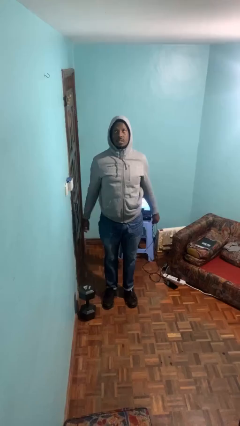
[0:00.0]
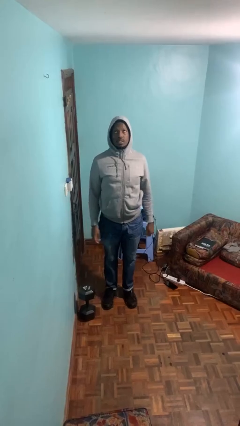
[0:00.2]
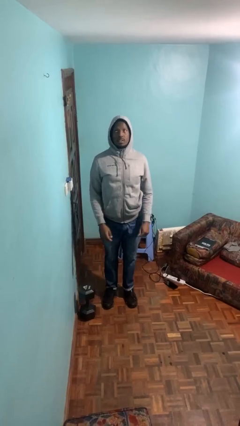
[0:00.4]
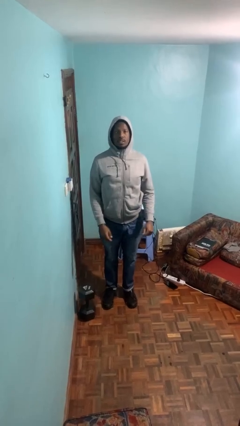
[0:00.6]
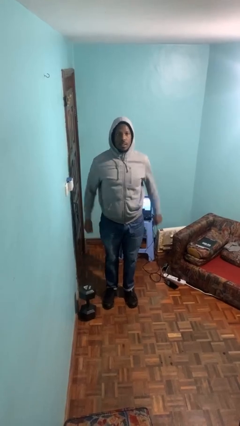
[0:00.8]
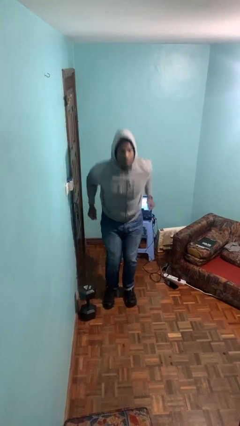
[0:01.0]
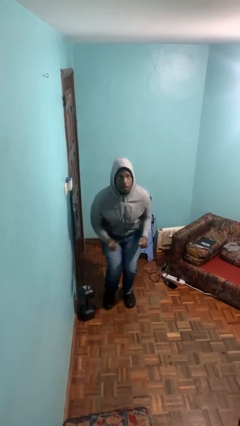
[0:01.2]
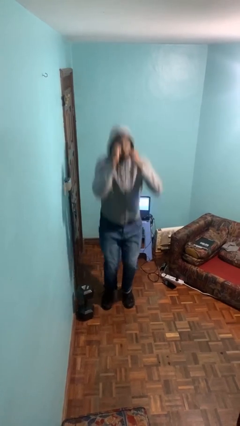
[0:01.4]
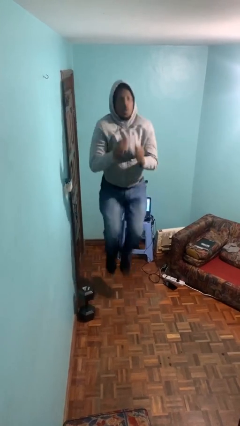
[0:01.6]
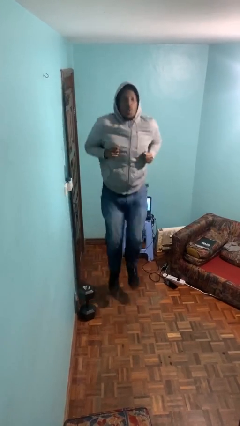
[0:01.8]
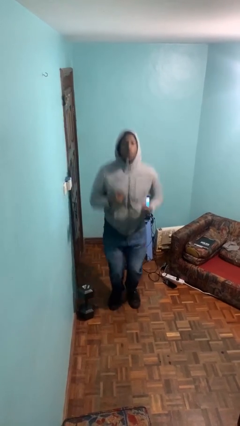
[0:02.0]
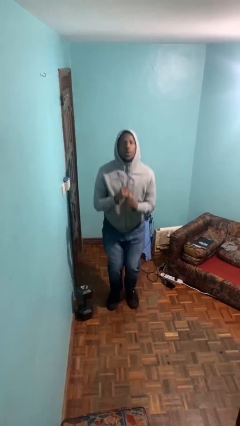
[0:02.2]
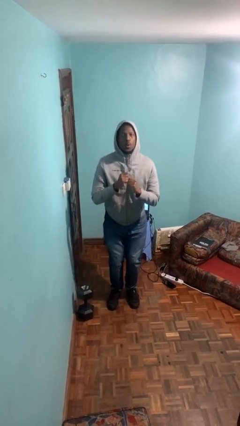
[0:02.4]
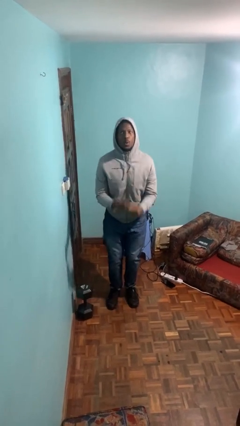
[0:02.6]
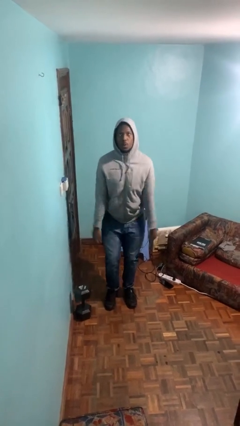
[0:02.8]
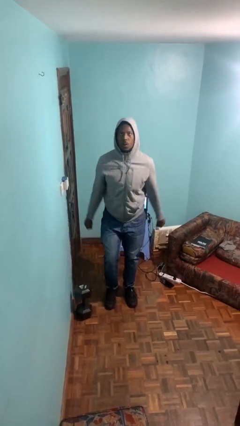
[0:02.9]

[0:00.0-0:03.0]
person jumps

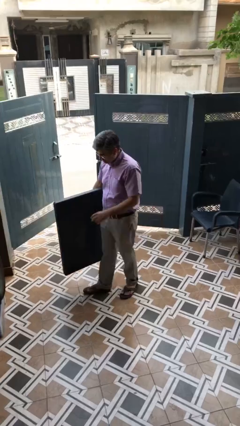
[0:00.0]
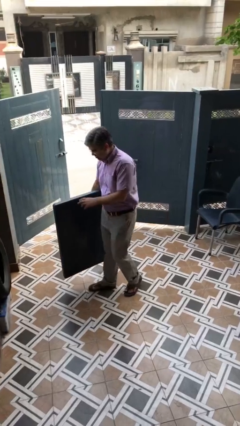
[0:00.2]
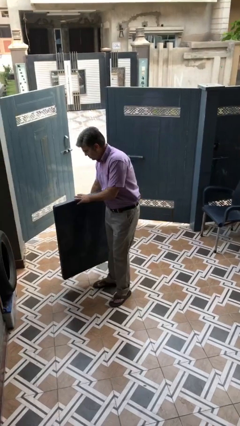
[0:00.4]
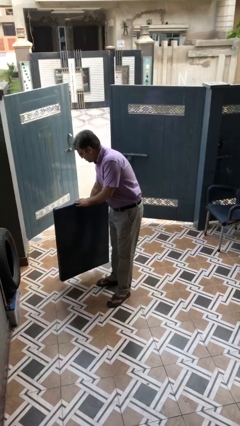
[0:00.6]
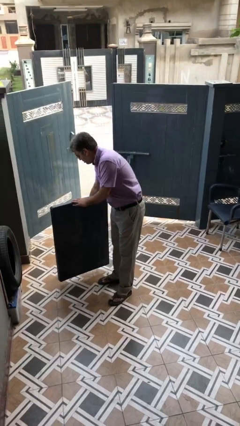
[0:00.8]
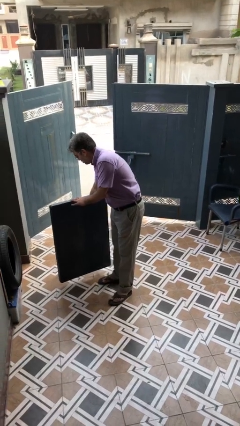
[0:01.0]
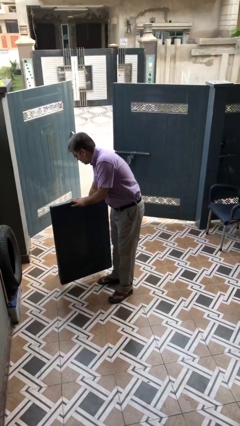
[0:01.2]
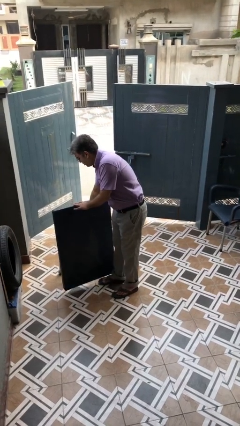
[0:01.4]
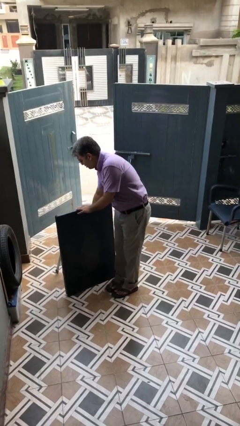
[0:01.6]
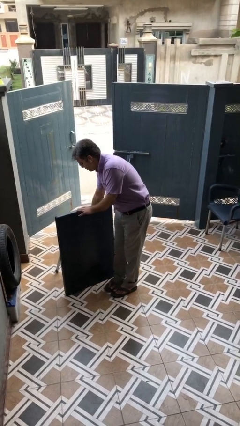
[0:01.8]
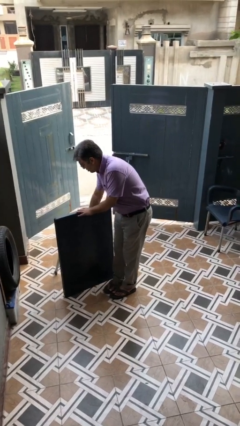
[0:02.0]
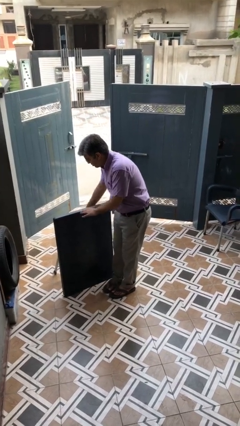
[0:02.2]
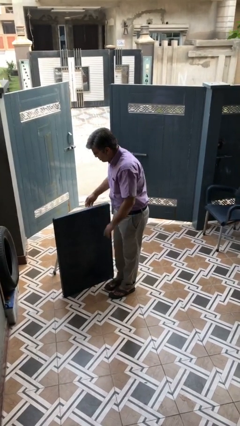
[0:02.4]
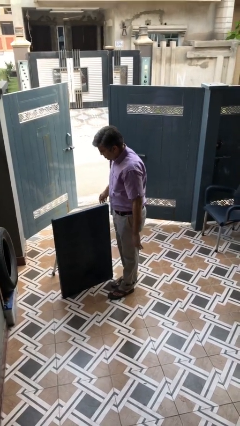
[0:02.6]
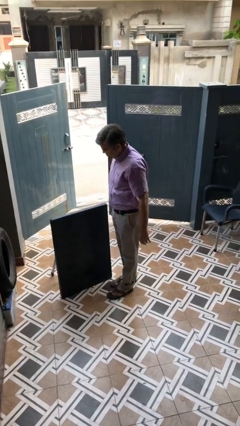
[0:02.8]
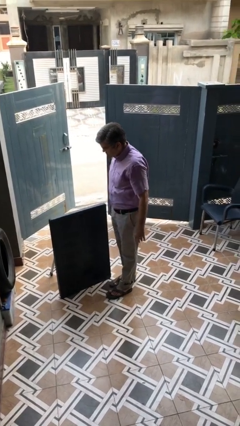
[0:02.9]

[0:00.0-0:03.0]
person puts down object on floor

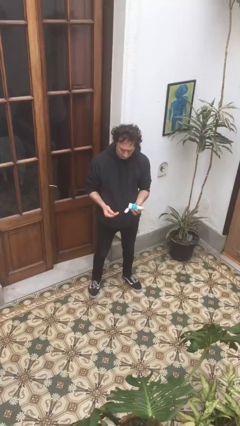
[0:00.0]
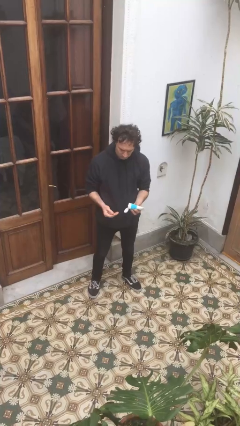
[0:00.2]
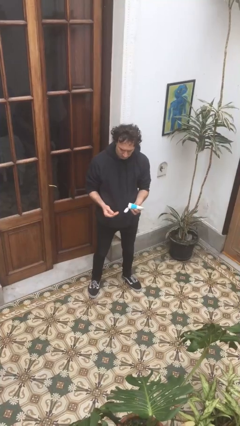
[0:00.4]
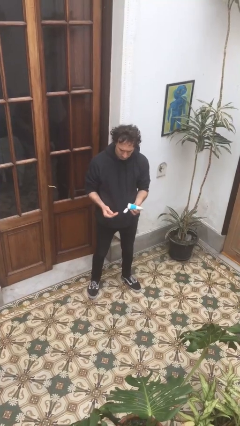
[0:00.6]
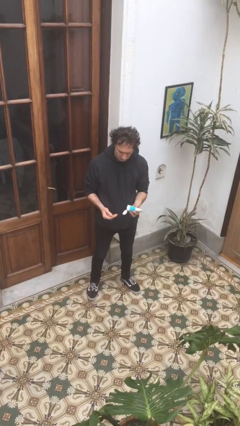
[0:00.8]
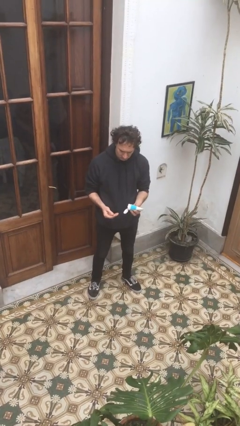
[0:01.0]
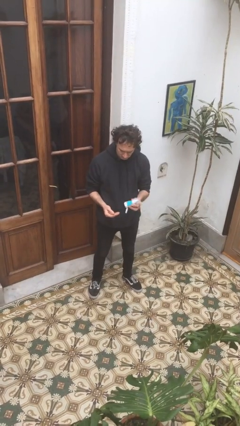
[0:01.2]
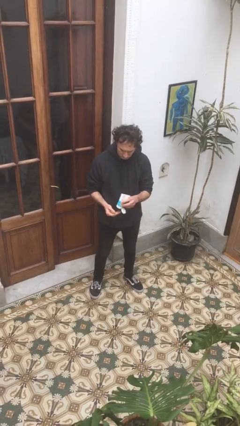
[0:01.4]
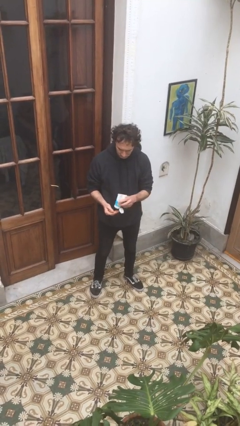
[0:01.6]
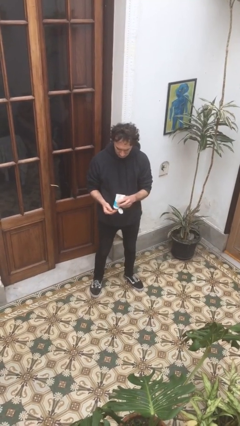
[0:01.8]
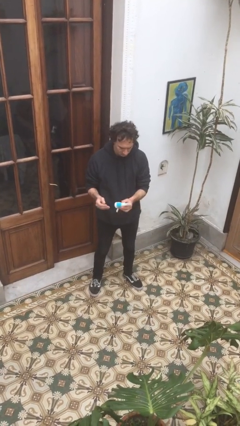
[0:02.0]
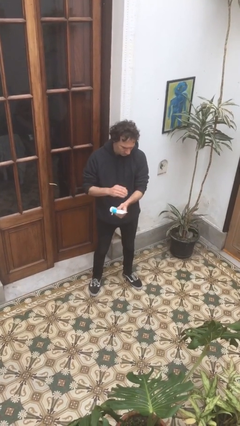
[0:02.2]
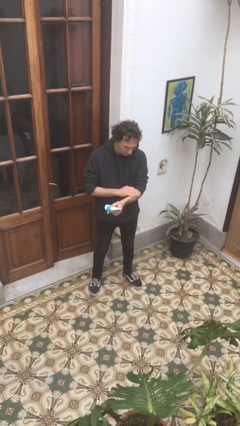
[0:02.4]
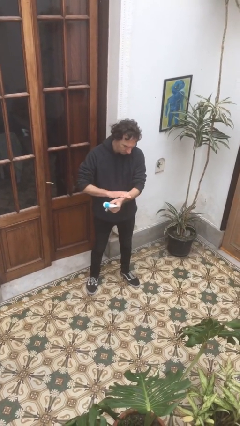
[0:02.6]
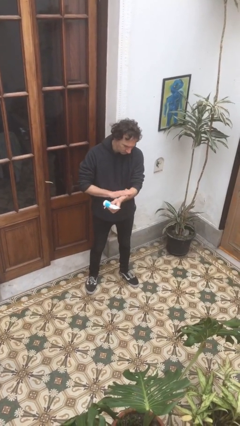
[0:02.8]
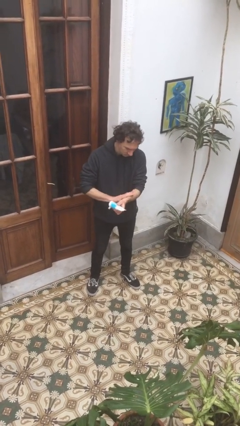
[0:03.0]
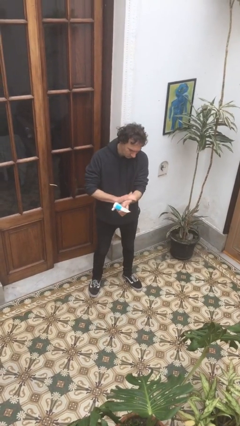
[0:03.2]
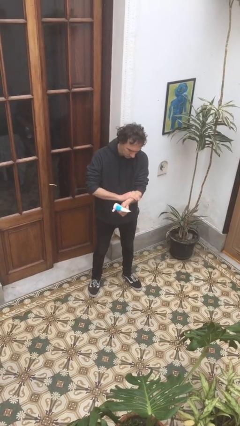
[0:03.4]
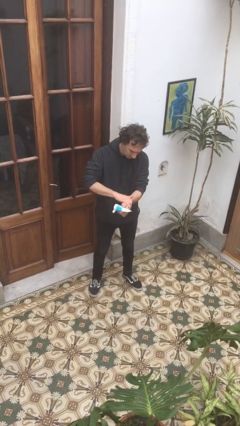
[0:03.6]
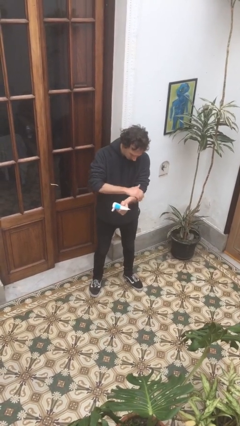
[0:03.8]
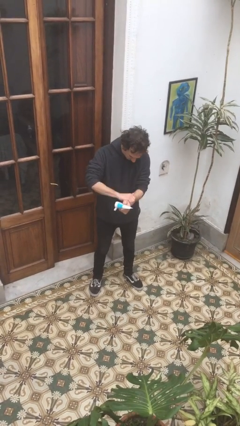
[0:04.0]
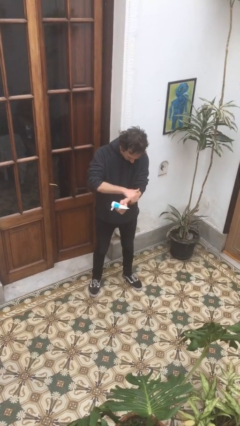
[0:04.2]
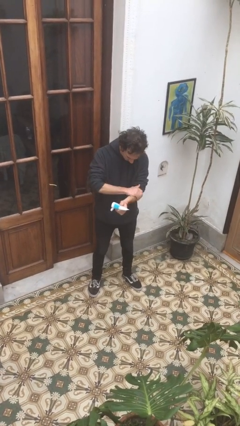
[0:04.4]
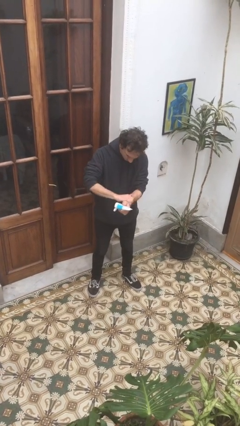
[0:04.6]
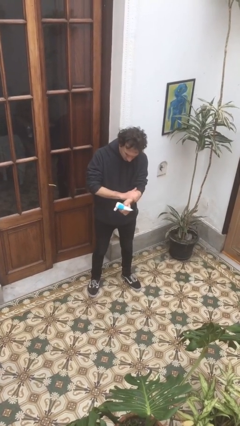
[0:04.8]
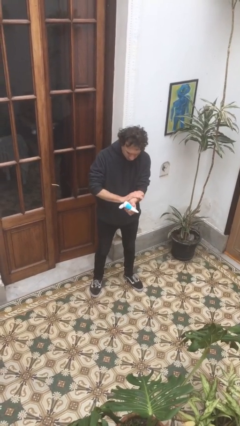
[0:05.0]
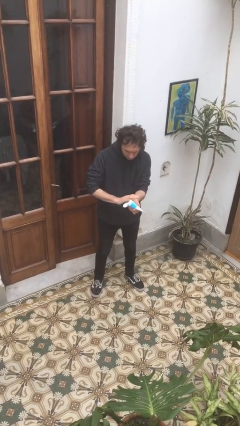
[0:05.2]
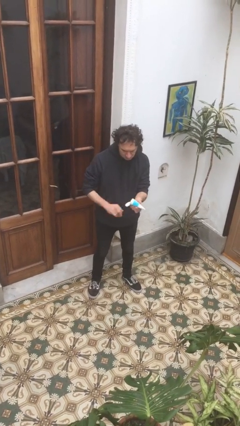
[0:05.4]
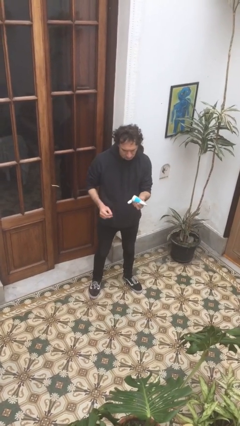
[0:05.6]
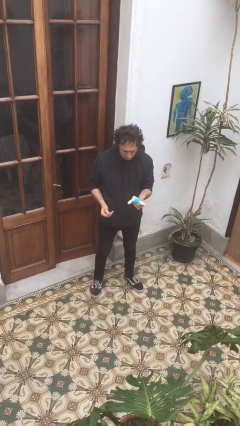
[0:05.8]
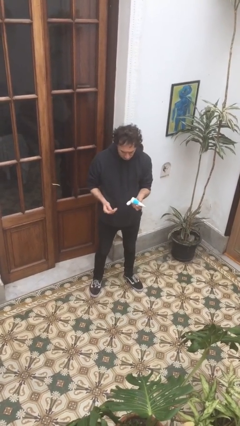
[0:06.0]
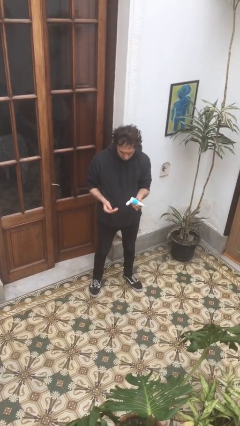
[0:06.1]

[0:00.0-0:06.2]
person applies sunscreen

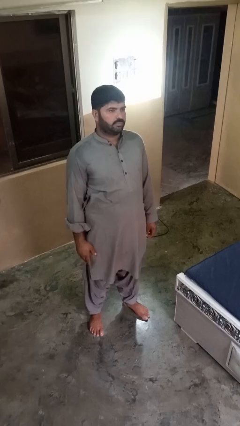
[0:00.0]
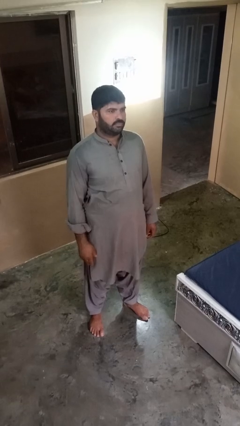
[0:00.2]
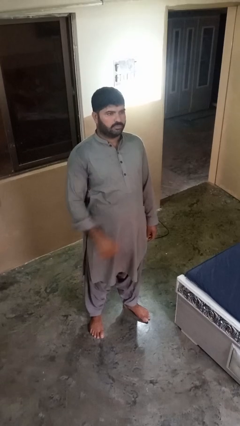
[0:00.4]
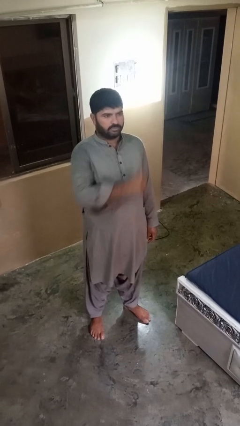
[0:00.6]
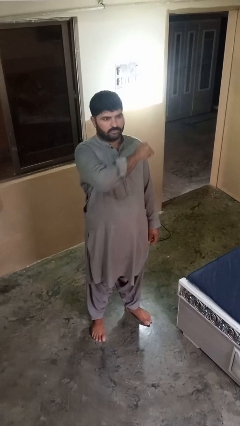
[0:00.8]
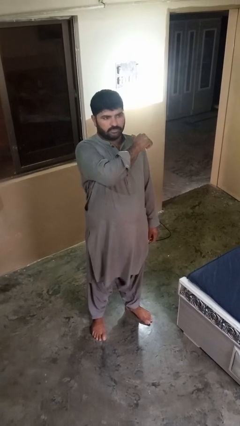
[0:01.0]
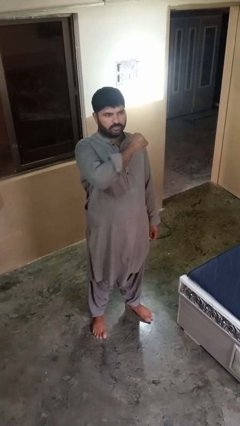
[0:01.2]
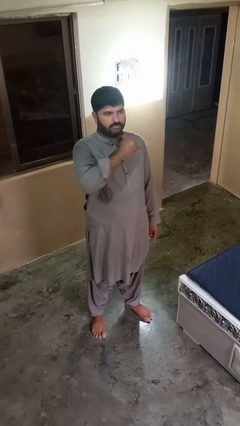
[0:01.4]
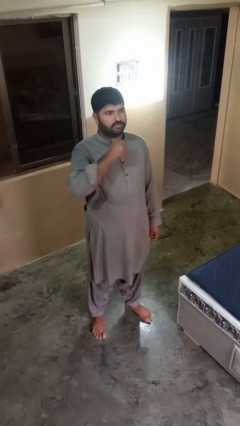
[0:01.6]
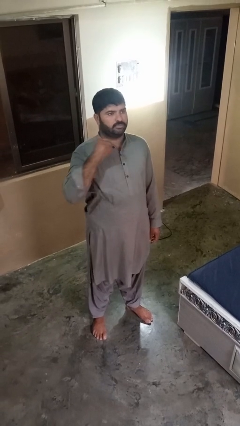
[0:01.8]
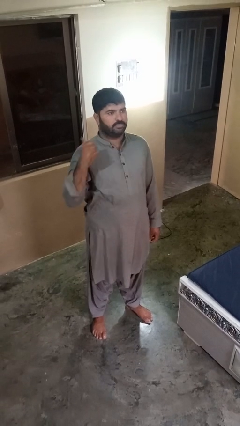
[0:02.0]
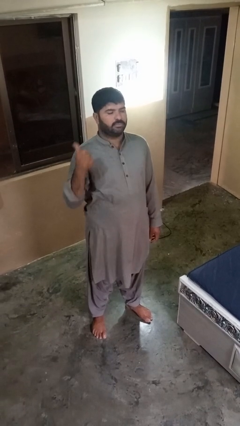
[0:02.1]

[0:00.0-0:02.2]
person gestures cut

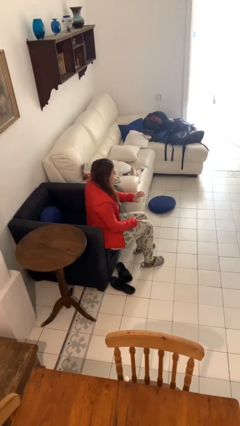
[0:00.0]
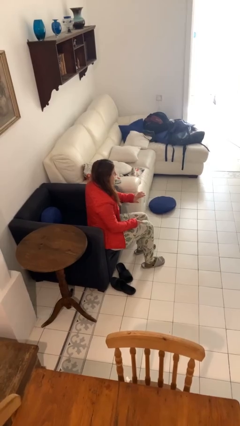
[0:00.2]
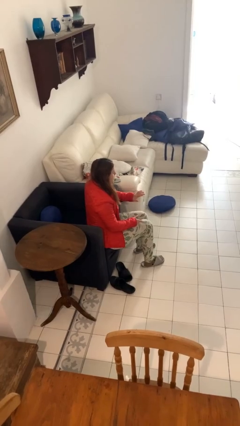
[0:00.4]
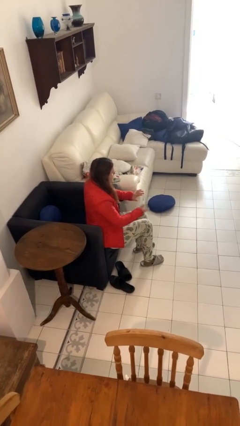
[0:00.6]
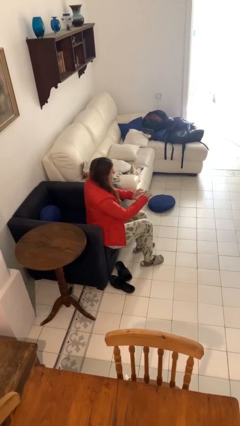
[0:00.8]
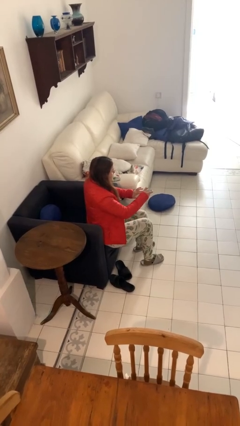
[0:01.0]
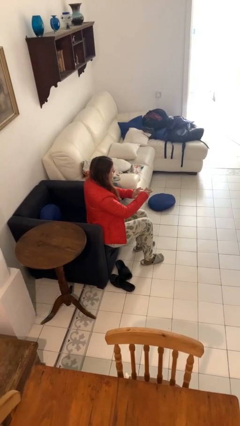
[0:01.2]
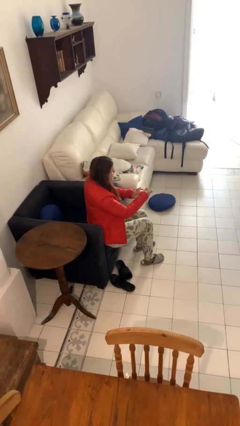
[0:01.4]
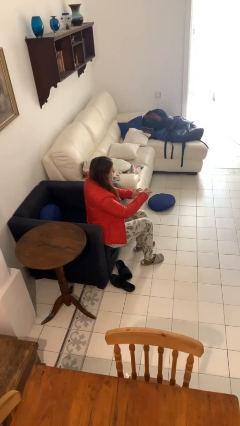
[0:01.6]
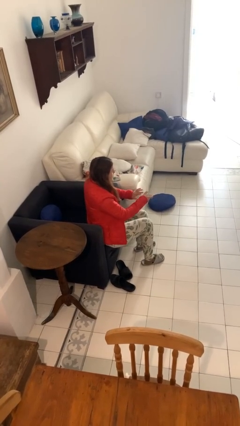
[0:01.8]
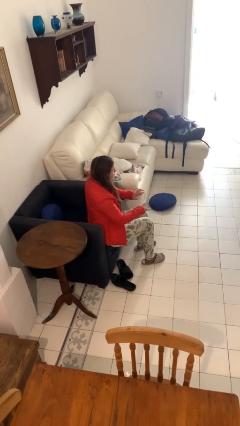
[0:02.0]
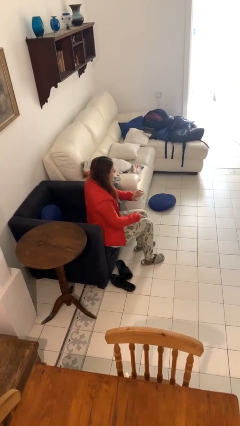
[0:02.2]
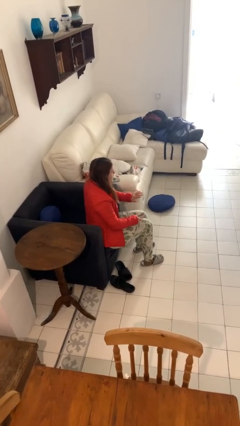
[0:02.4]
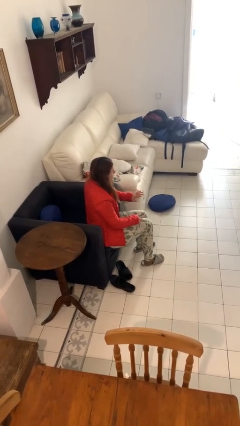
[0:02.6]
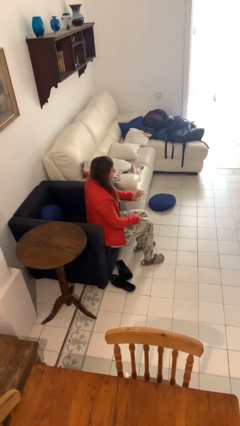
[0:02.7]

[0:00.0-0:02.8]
person clips fingernails

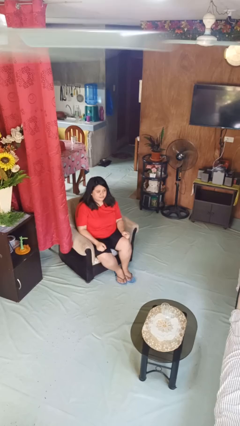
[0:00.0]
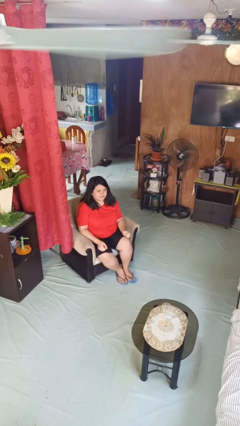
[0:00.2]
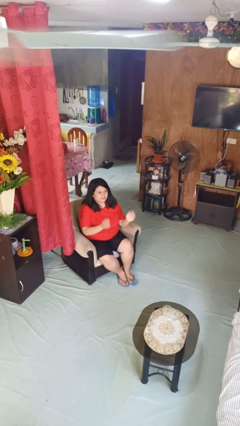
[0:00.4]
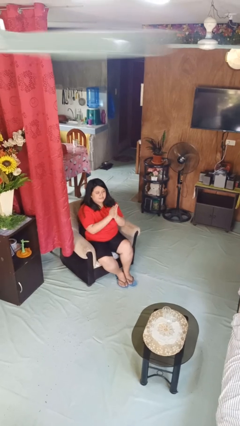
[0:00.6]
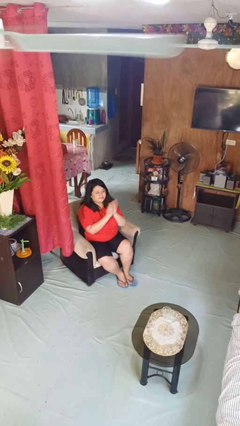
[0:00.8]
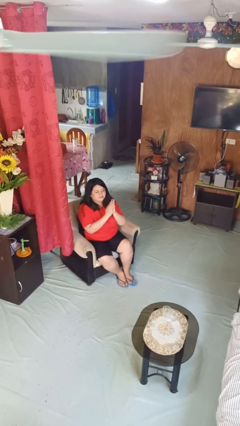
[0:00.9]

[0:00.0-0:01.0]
person claps hands
